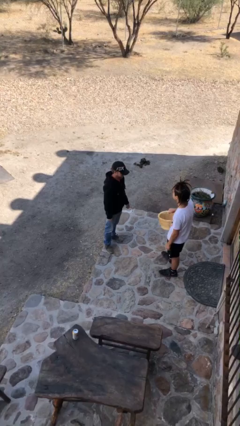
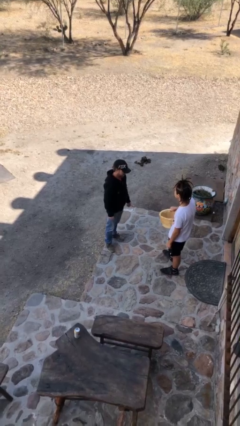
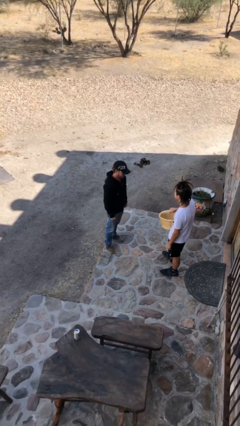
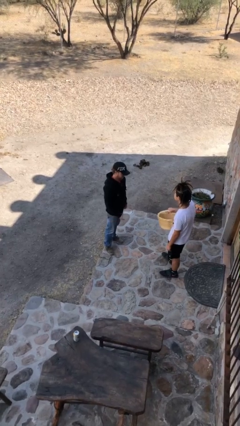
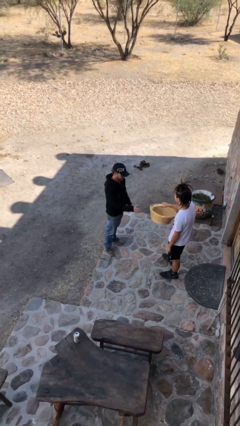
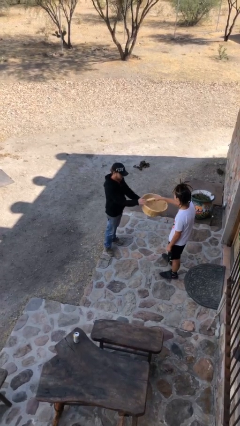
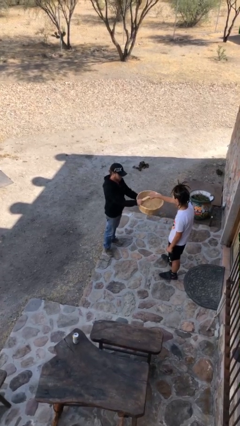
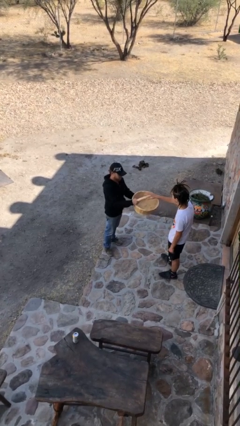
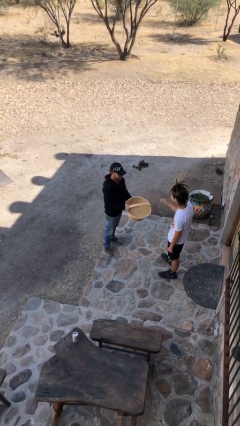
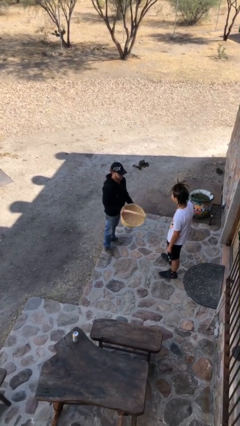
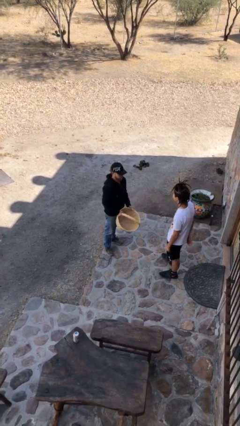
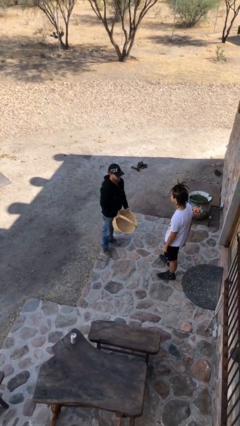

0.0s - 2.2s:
person transfers object to person

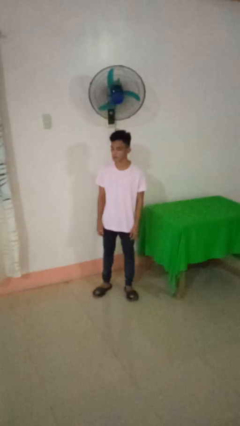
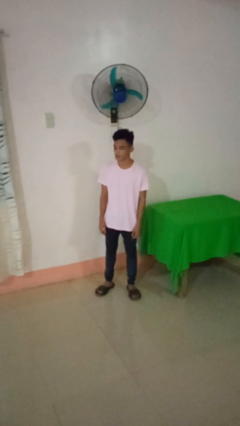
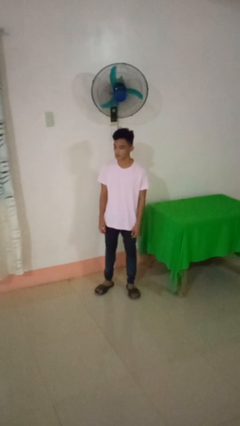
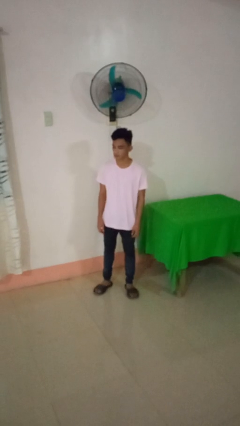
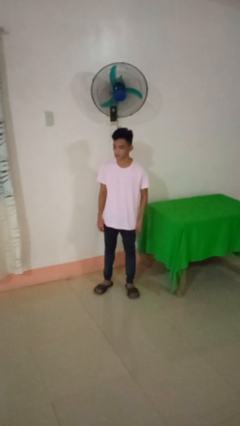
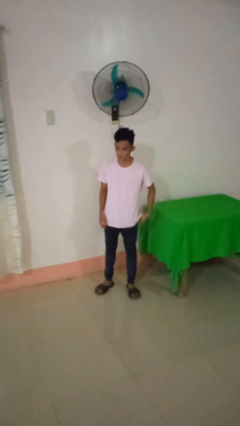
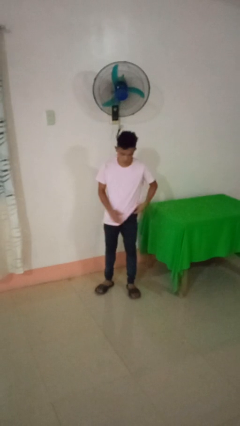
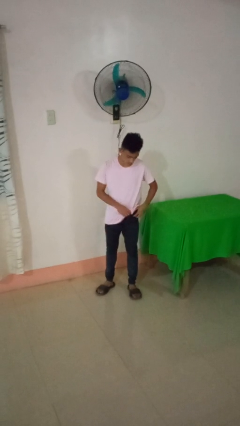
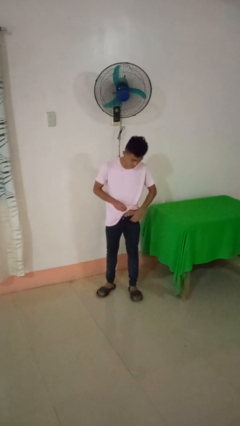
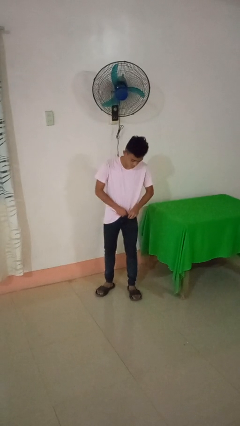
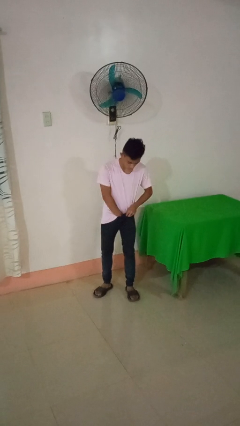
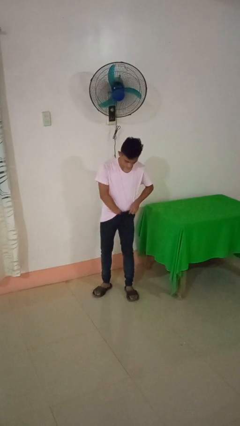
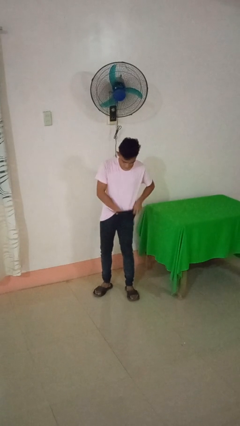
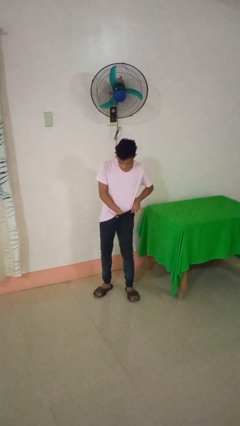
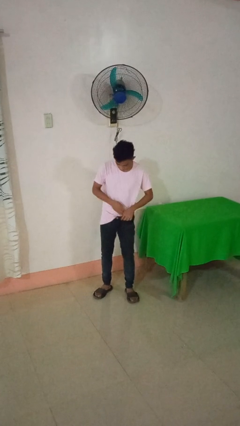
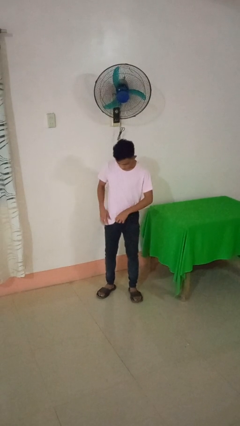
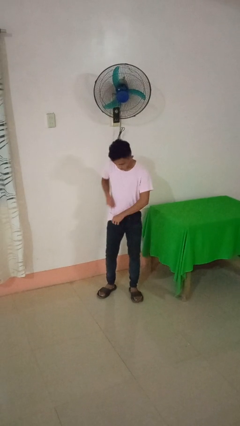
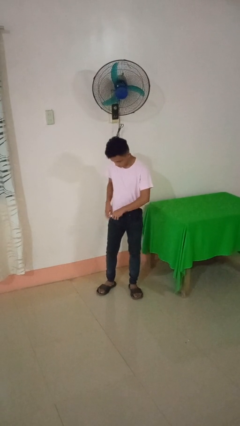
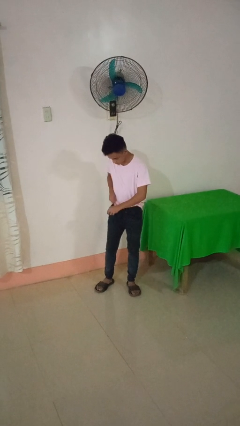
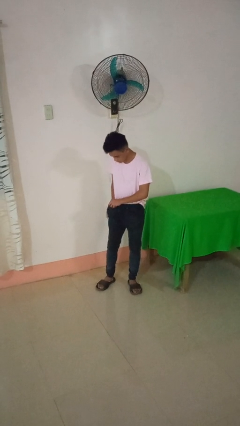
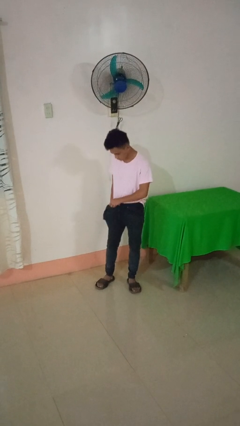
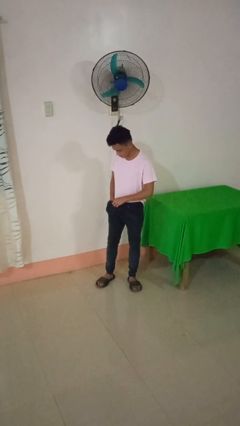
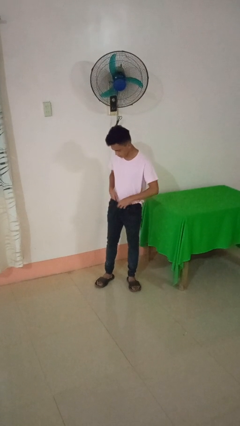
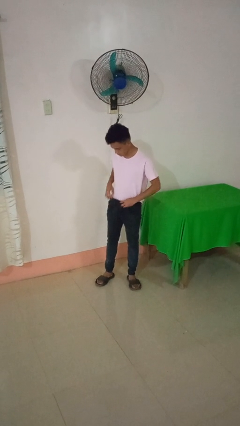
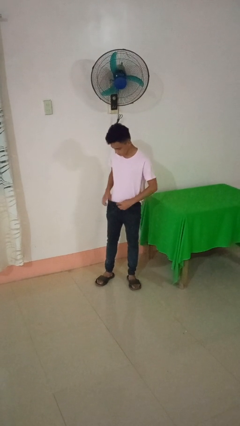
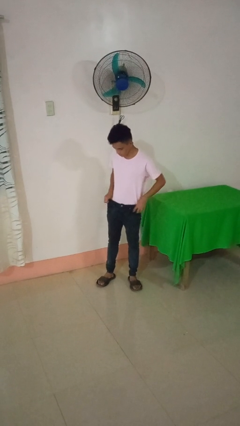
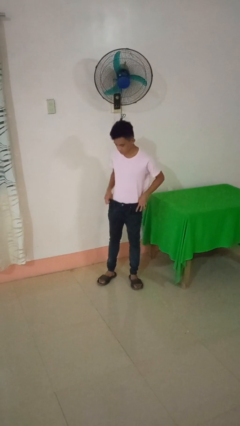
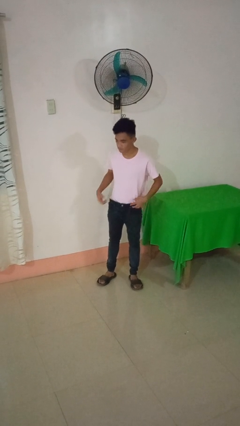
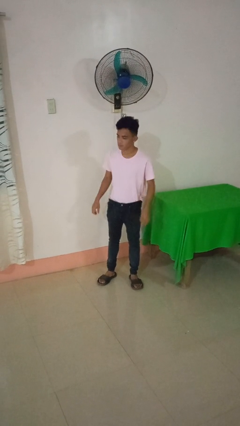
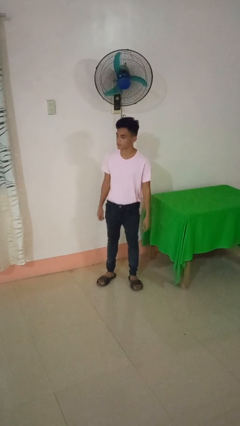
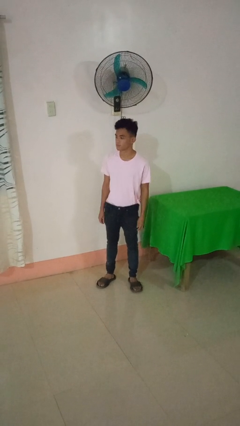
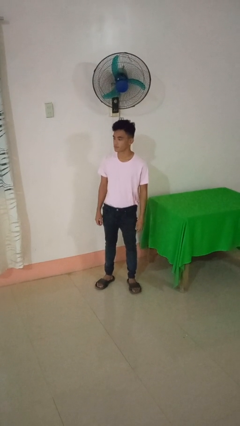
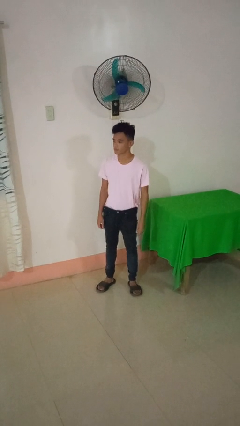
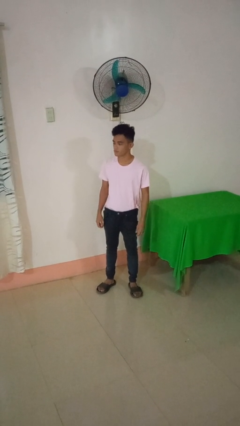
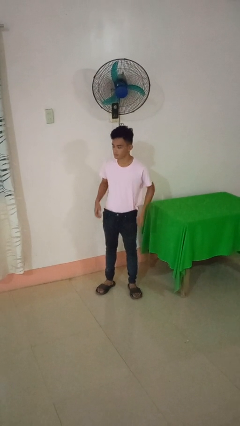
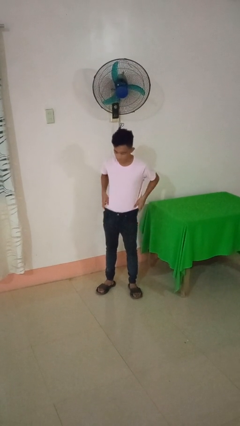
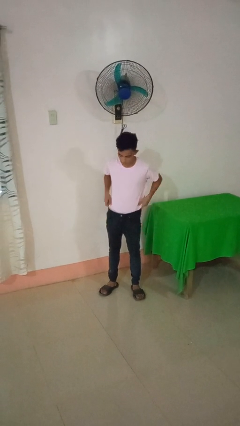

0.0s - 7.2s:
person tucks in shirt

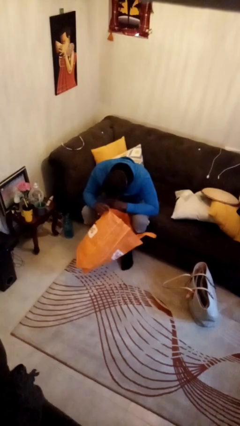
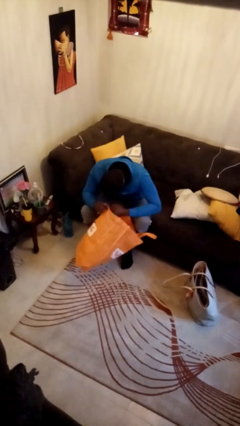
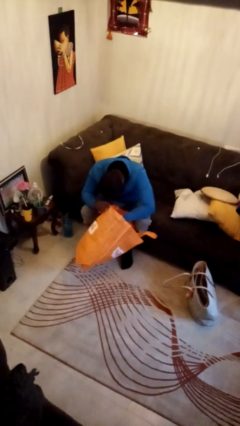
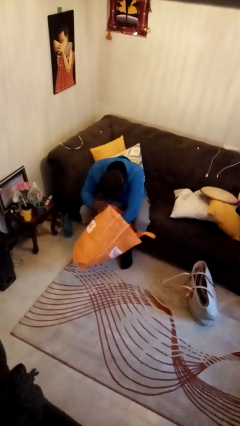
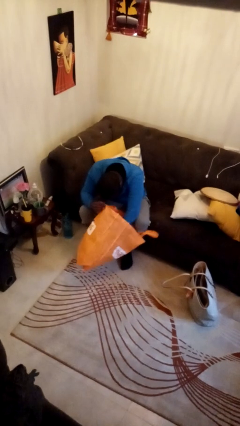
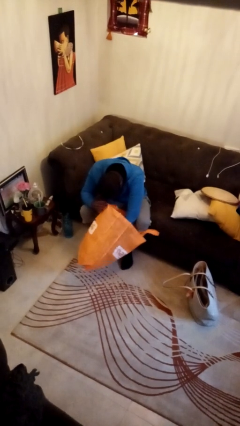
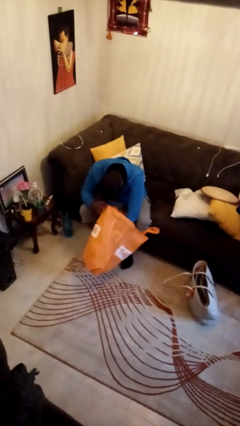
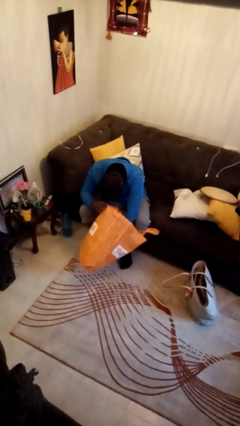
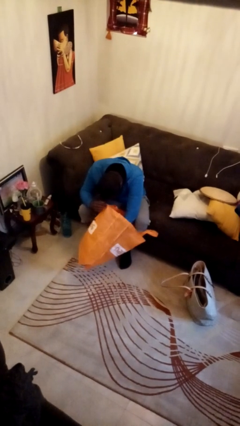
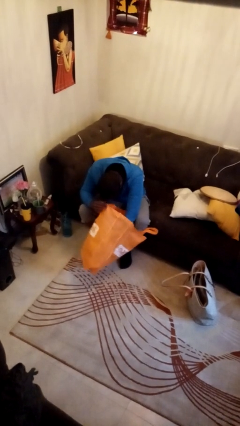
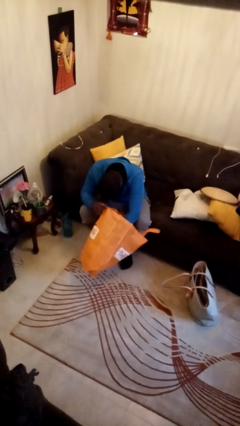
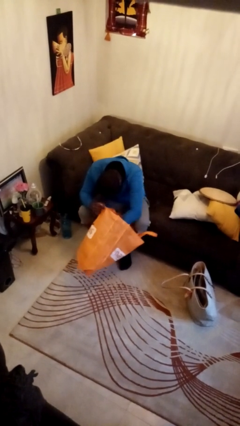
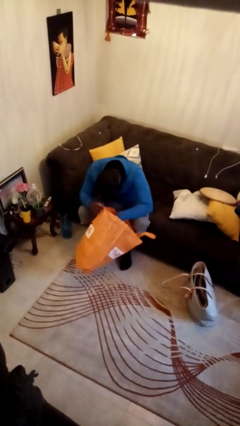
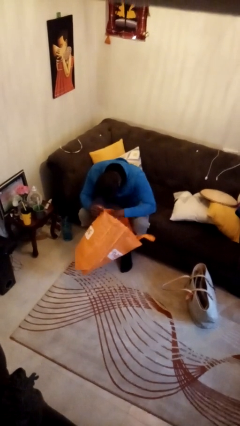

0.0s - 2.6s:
person searches in bag

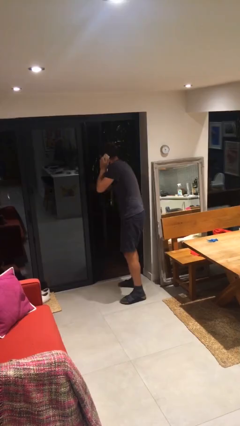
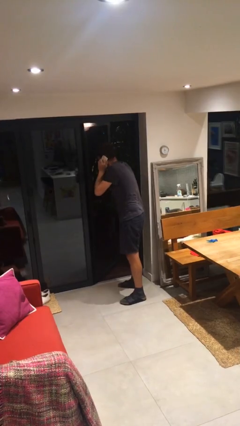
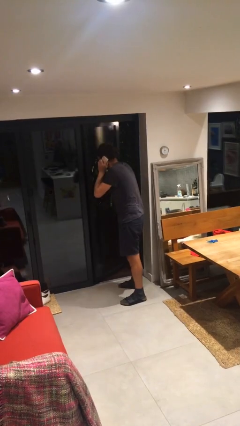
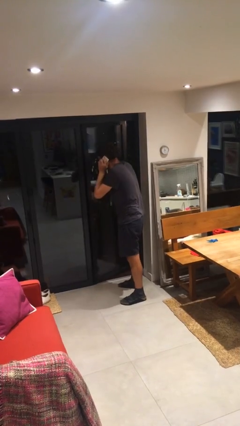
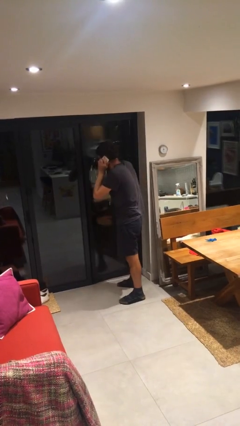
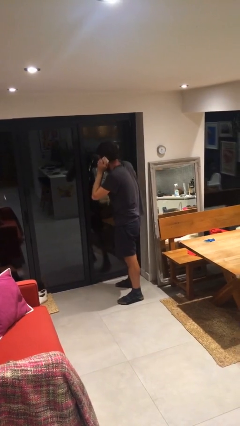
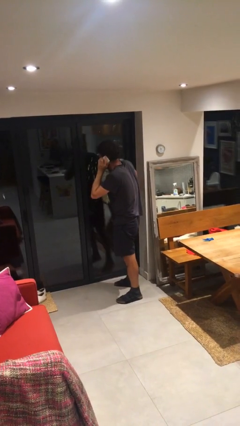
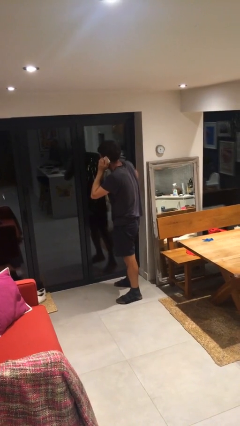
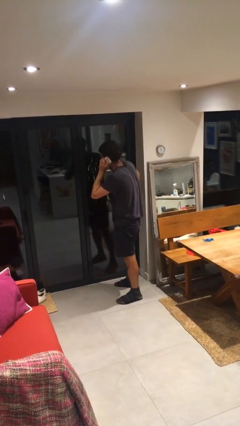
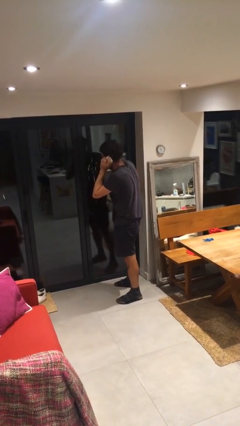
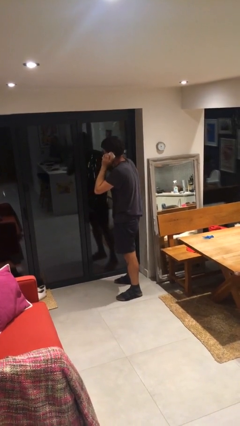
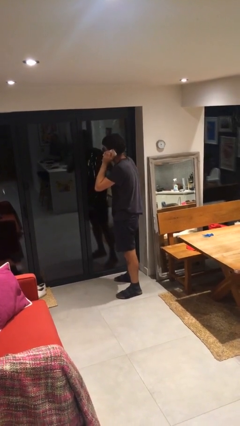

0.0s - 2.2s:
person closes facility door

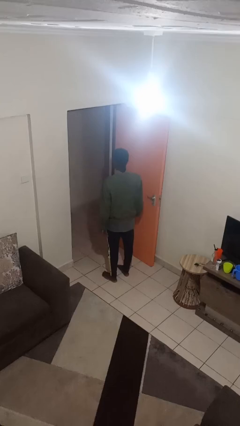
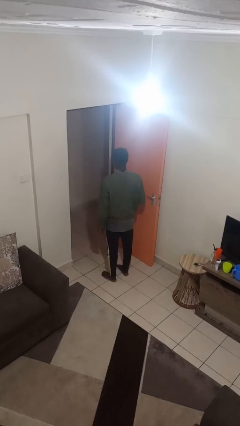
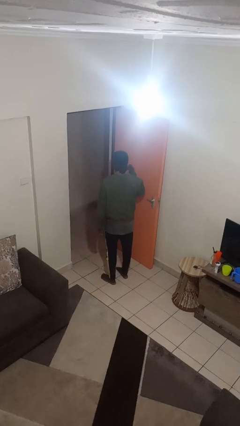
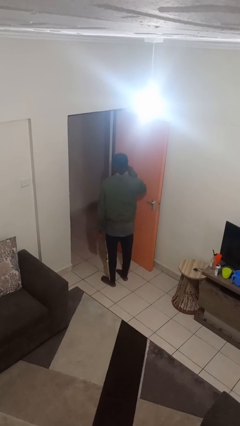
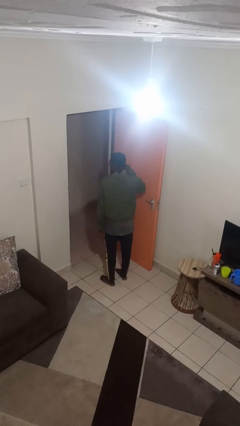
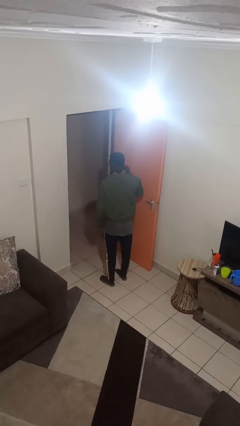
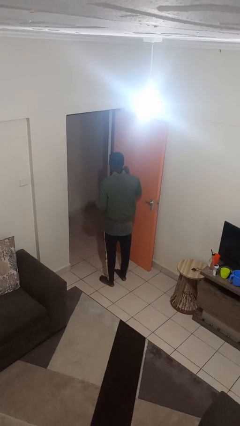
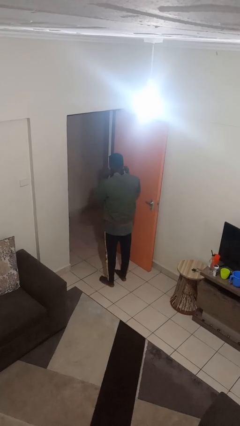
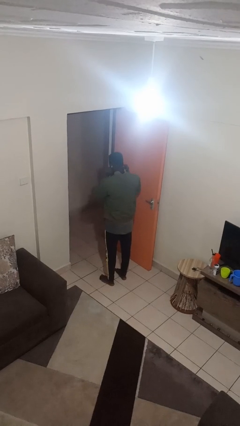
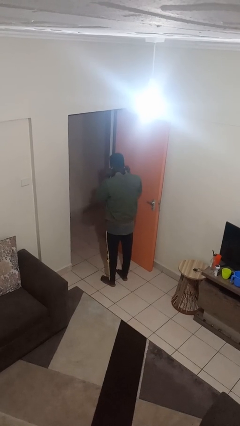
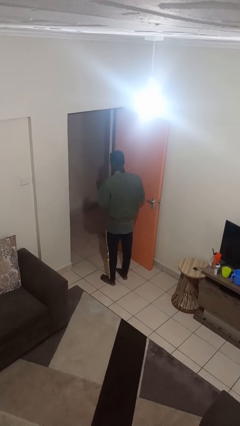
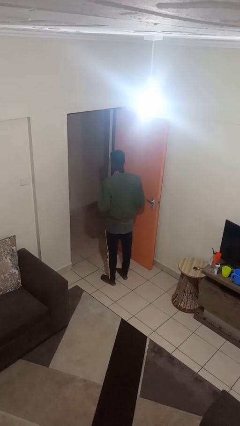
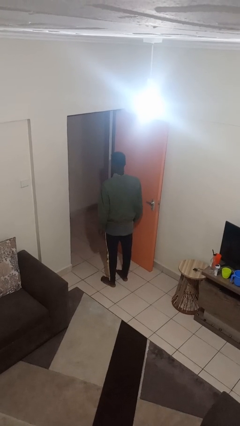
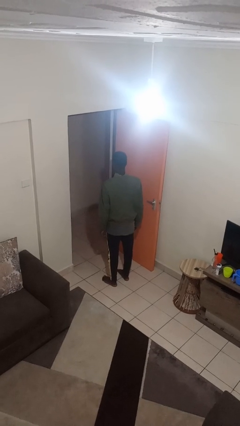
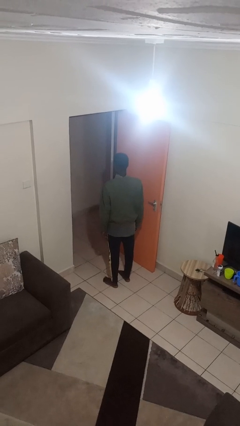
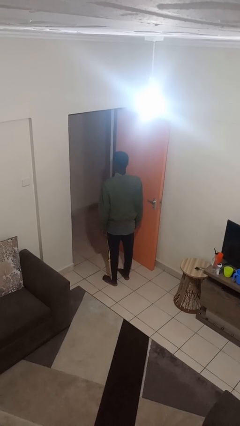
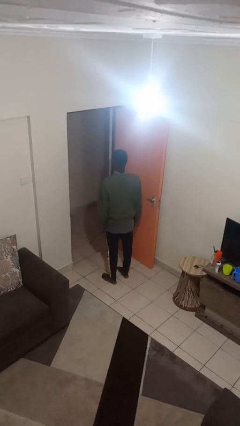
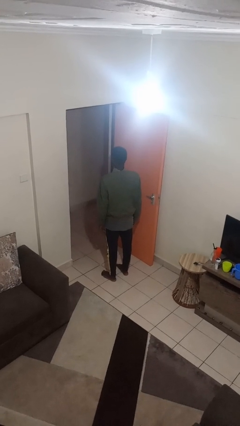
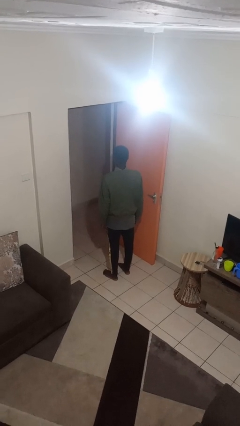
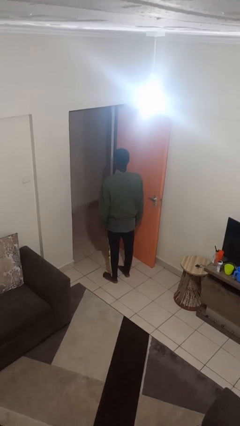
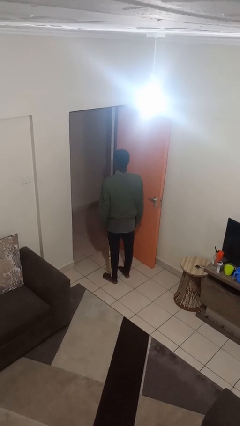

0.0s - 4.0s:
person puts on earrings
